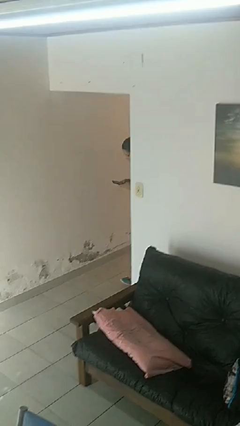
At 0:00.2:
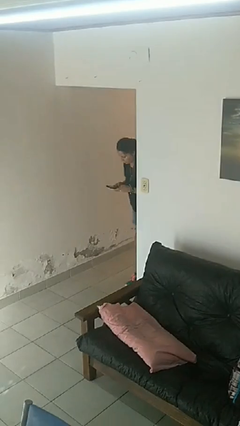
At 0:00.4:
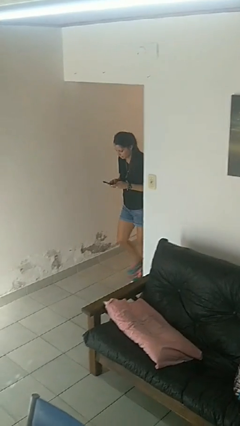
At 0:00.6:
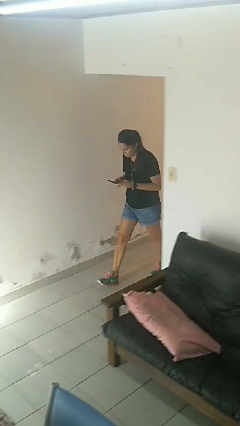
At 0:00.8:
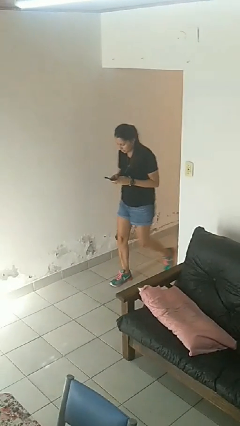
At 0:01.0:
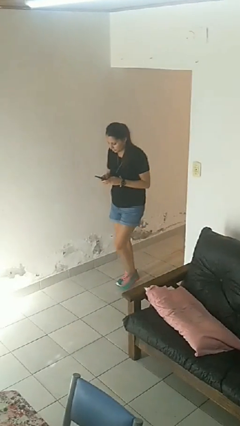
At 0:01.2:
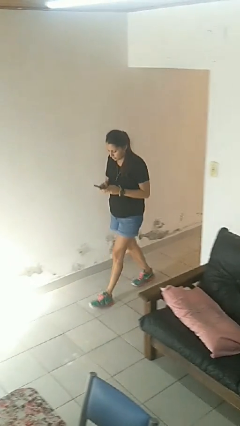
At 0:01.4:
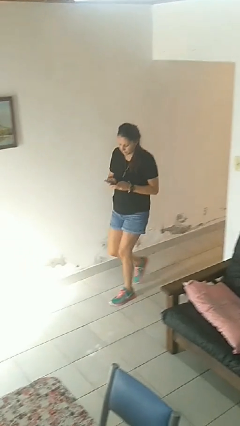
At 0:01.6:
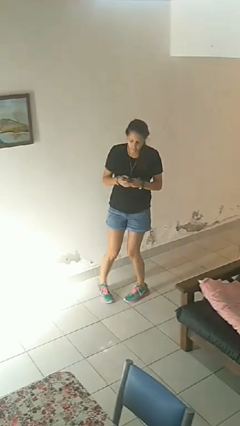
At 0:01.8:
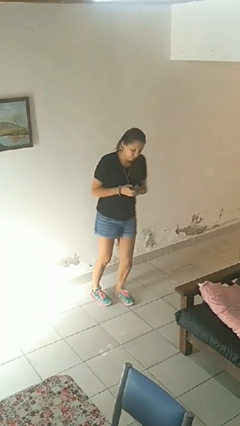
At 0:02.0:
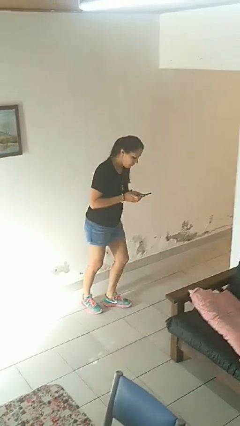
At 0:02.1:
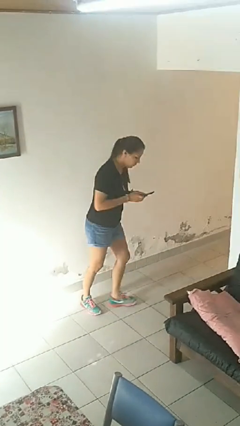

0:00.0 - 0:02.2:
person enters scene through structure

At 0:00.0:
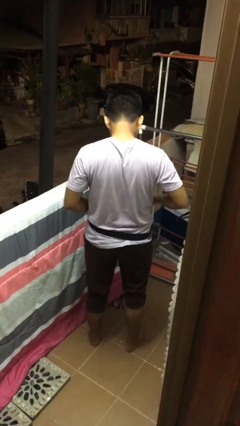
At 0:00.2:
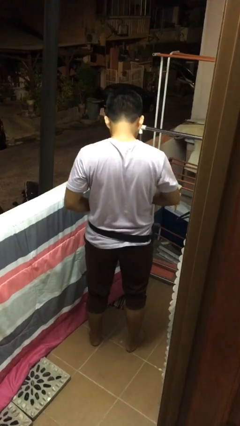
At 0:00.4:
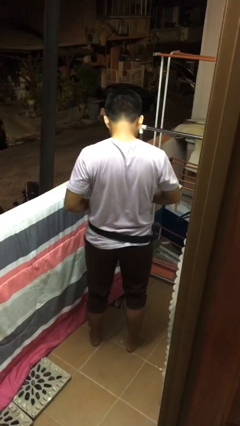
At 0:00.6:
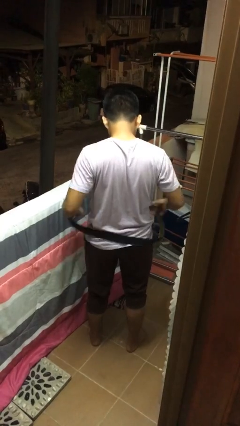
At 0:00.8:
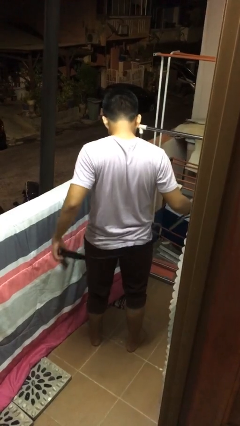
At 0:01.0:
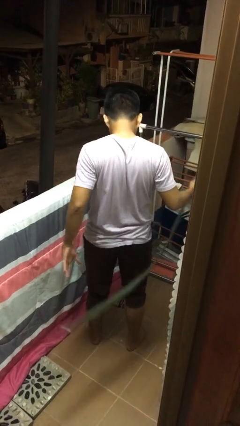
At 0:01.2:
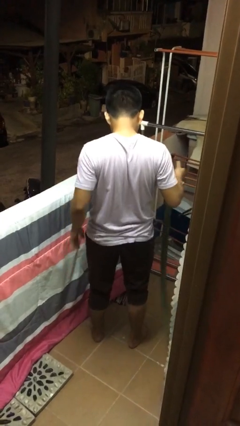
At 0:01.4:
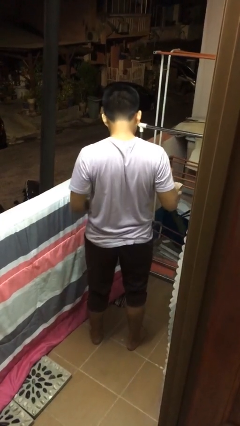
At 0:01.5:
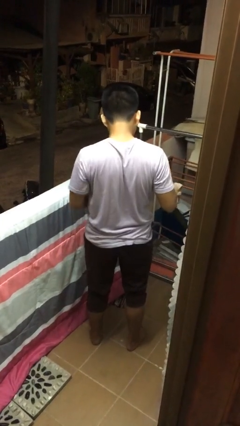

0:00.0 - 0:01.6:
person takes off belt

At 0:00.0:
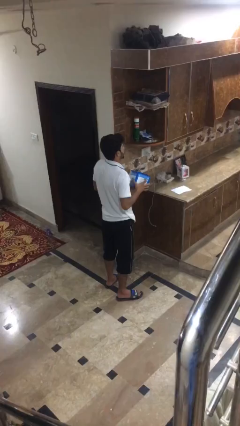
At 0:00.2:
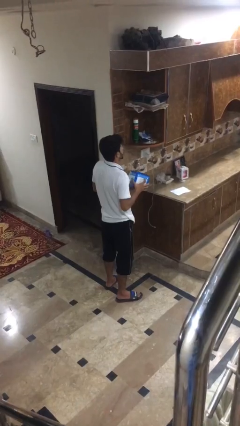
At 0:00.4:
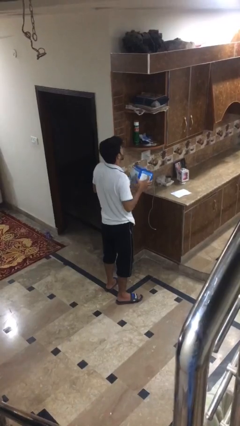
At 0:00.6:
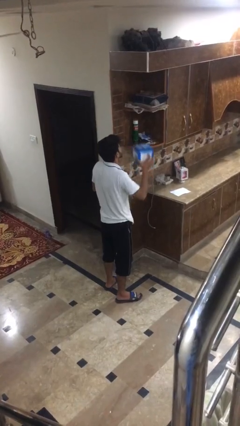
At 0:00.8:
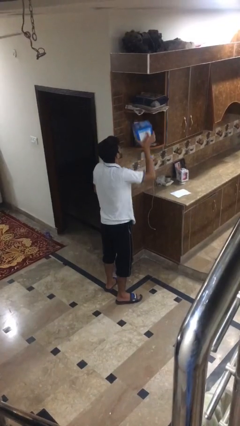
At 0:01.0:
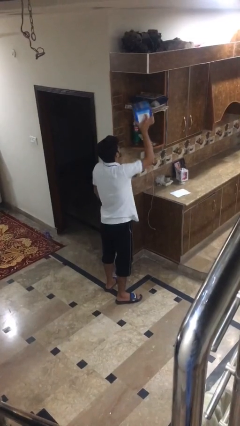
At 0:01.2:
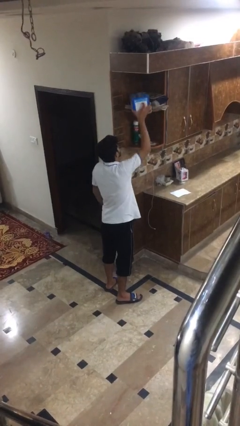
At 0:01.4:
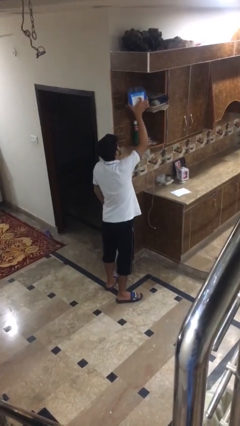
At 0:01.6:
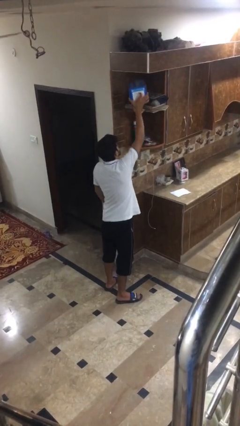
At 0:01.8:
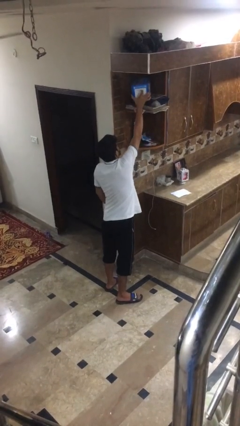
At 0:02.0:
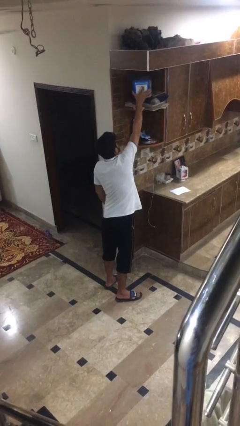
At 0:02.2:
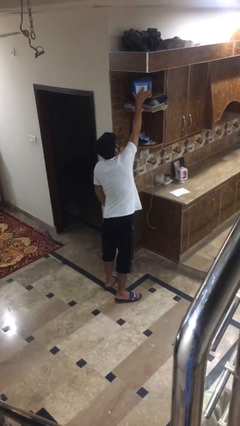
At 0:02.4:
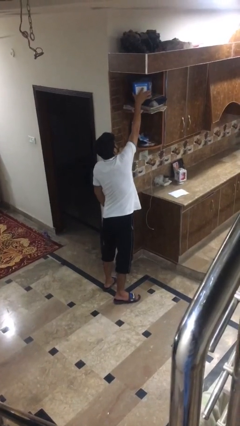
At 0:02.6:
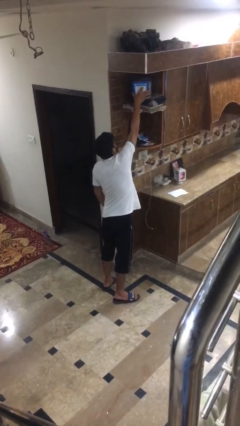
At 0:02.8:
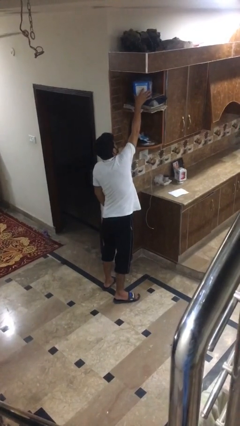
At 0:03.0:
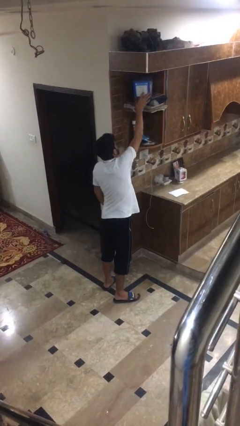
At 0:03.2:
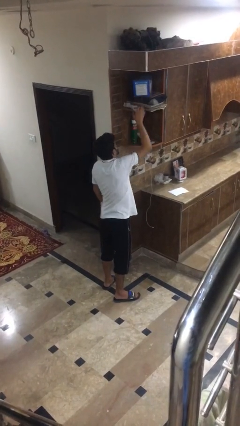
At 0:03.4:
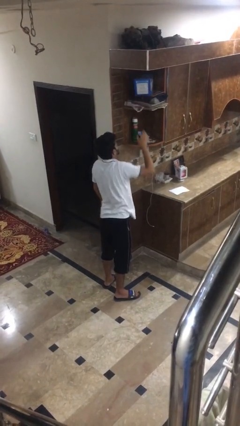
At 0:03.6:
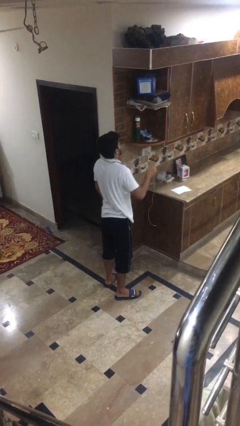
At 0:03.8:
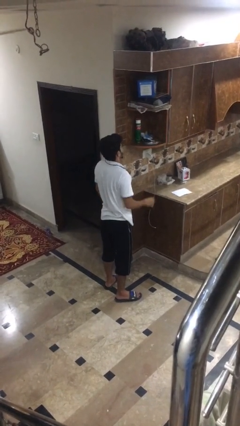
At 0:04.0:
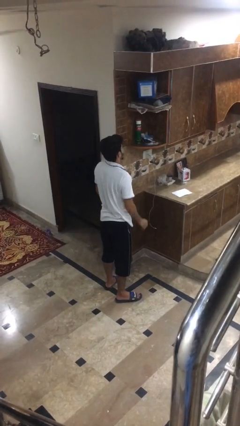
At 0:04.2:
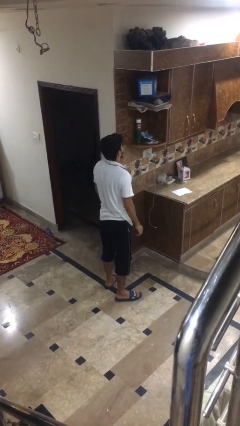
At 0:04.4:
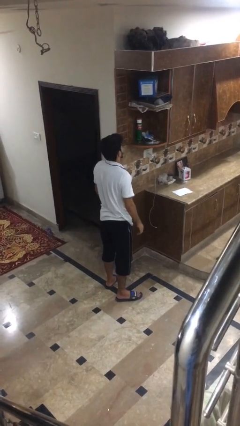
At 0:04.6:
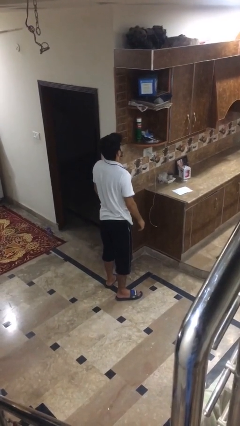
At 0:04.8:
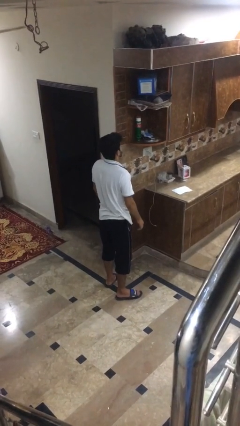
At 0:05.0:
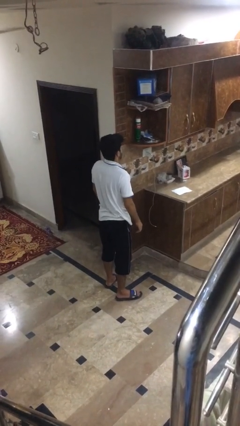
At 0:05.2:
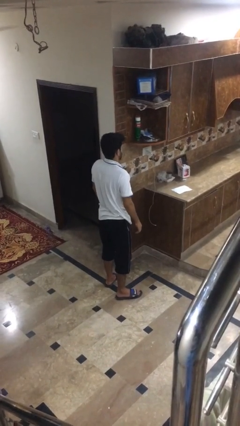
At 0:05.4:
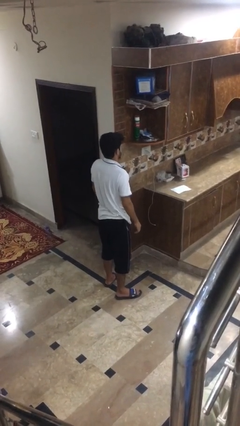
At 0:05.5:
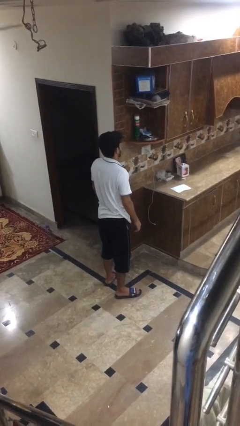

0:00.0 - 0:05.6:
person picks up object from shelf

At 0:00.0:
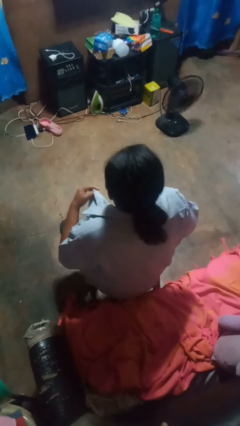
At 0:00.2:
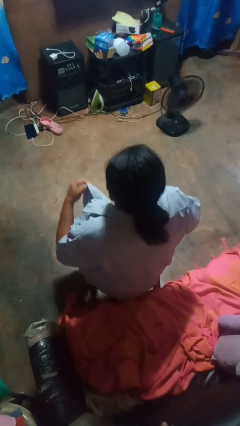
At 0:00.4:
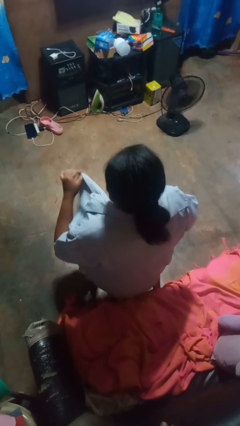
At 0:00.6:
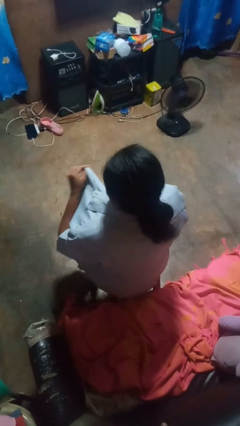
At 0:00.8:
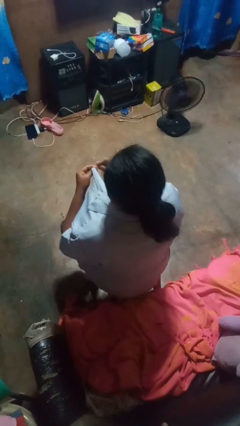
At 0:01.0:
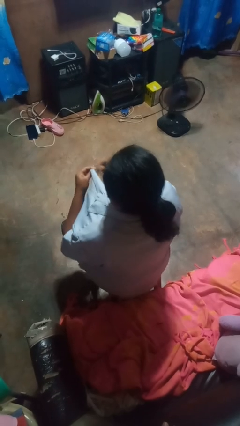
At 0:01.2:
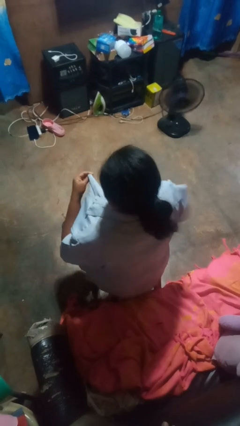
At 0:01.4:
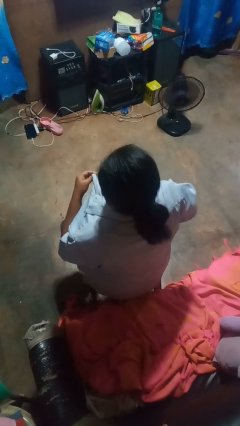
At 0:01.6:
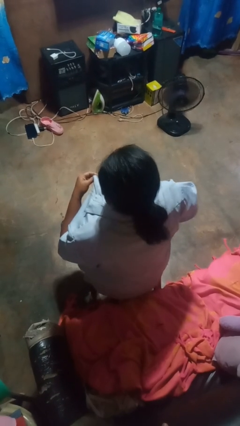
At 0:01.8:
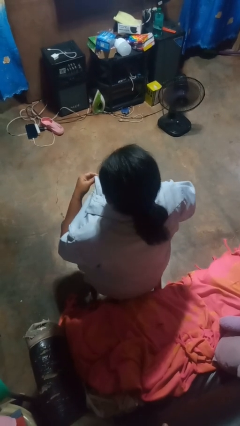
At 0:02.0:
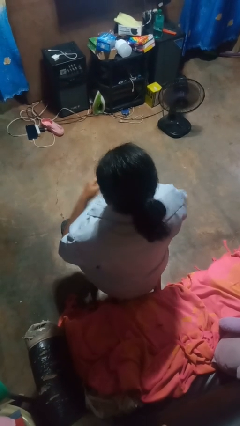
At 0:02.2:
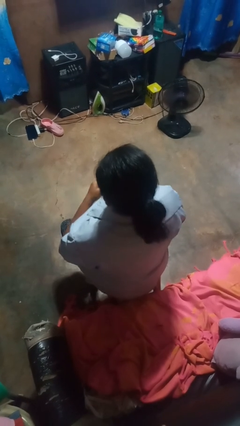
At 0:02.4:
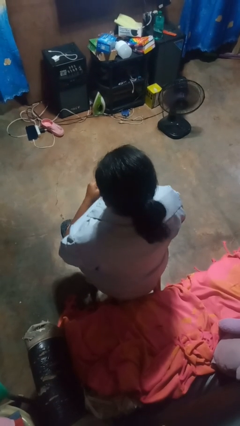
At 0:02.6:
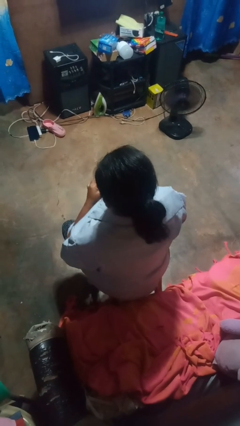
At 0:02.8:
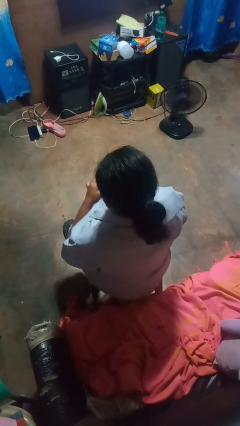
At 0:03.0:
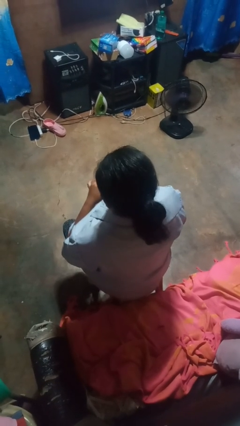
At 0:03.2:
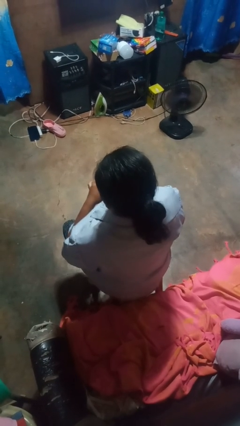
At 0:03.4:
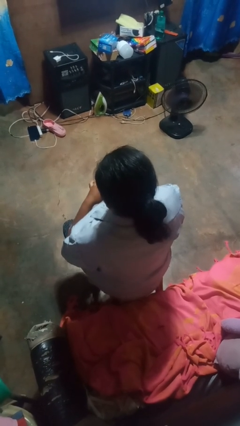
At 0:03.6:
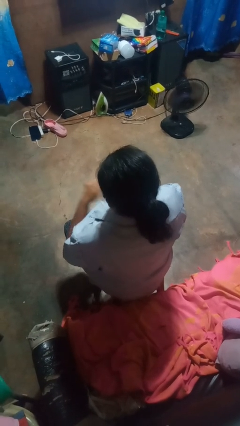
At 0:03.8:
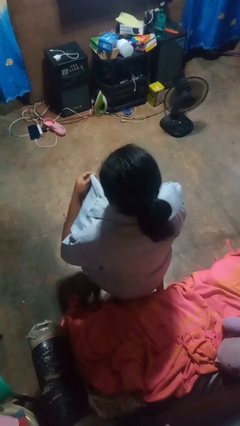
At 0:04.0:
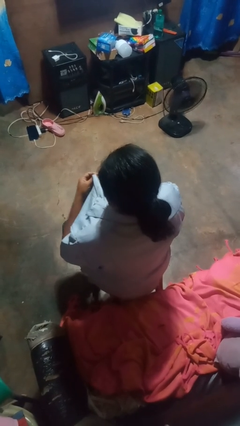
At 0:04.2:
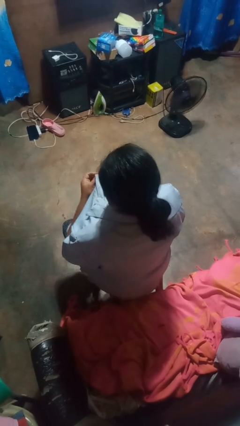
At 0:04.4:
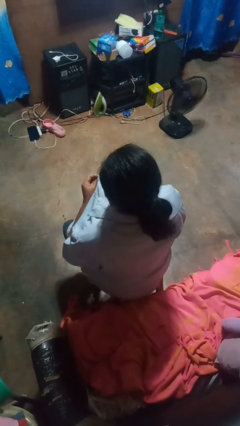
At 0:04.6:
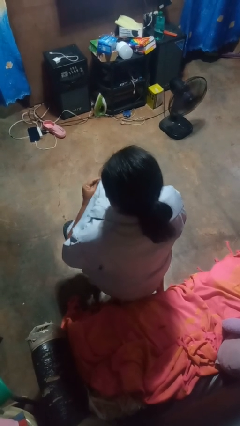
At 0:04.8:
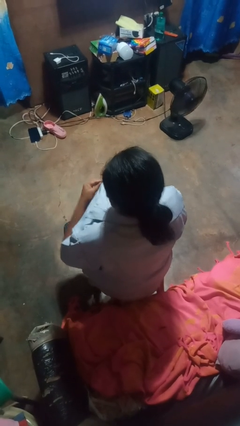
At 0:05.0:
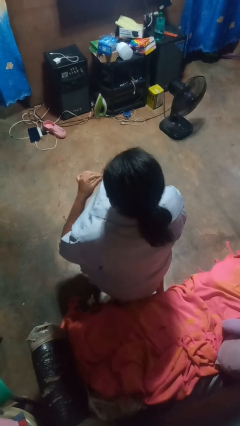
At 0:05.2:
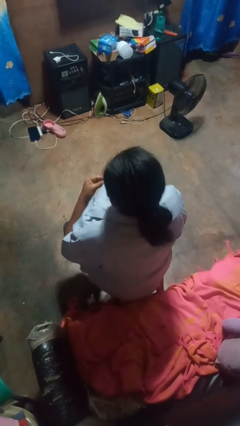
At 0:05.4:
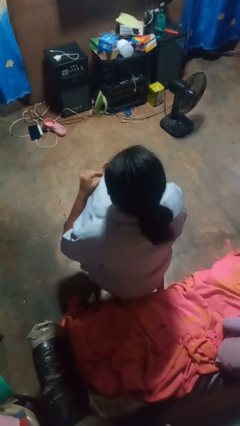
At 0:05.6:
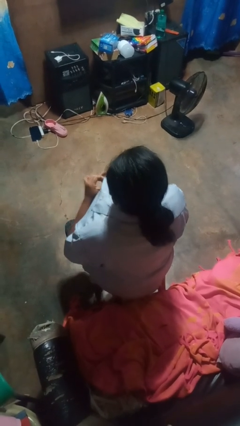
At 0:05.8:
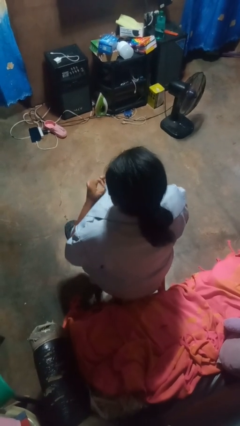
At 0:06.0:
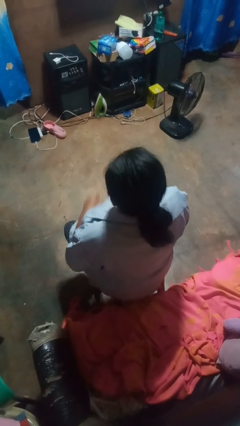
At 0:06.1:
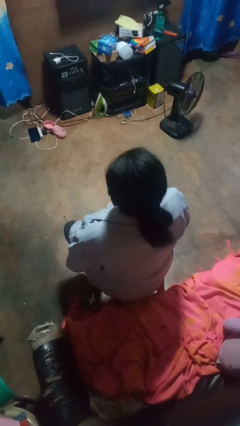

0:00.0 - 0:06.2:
person buttons shirt

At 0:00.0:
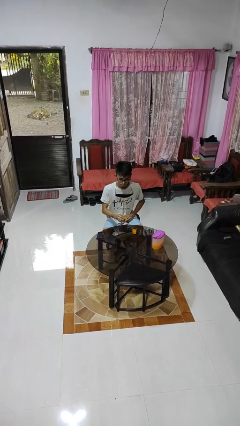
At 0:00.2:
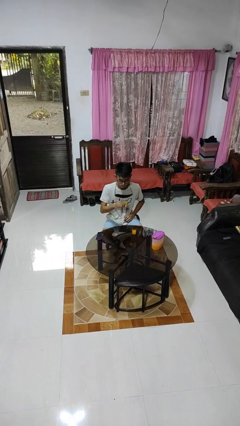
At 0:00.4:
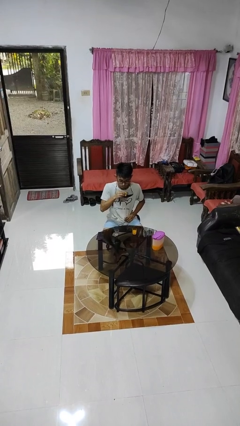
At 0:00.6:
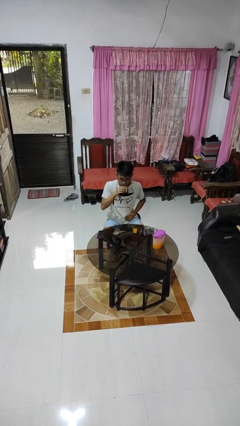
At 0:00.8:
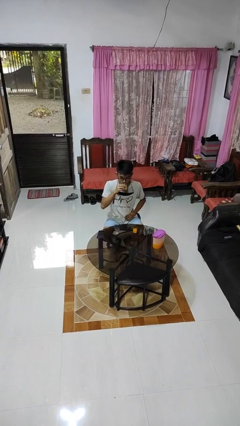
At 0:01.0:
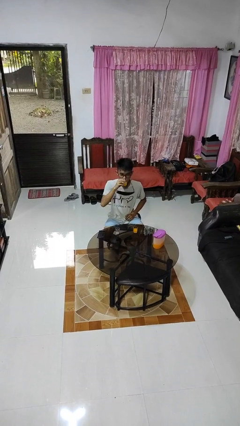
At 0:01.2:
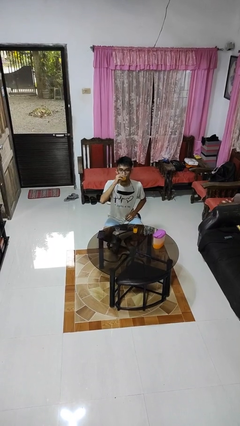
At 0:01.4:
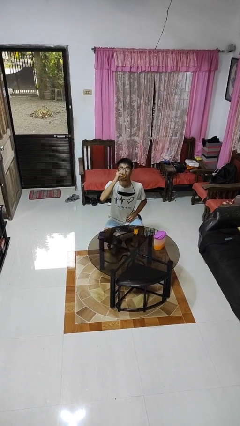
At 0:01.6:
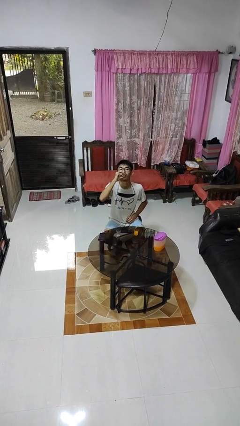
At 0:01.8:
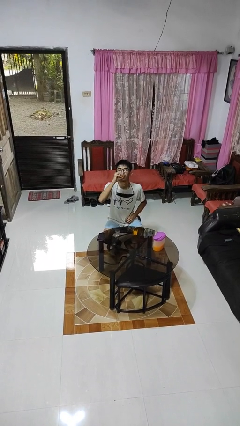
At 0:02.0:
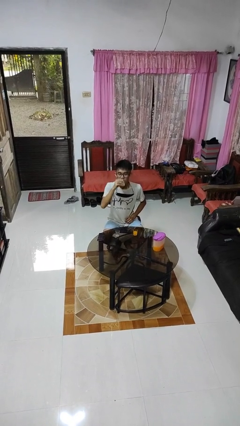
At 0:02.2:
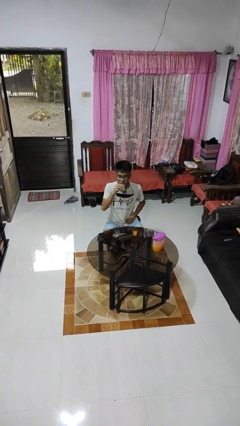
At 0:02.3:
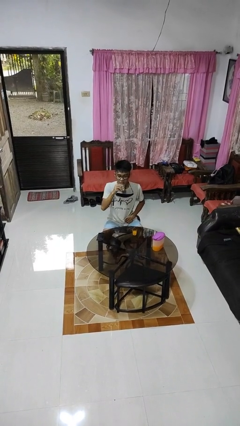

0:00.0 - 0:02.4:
person drinks from shotglass
